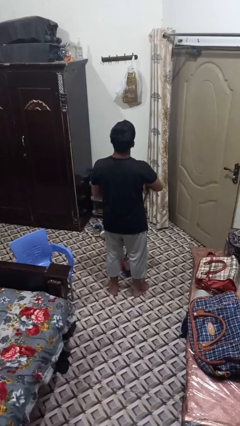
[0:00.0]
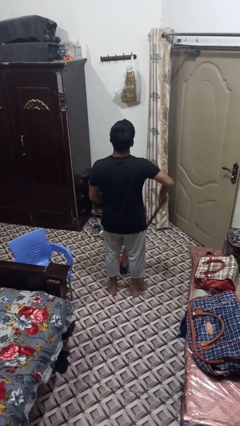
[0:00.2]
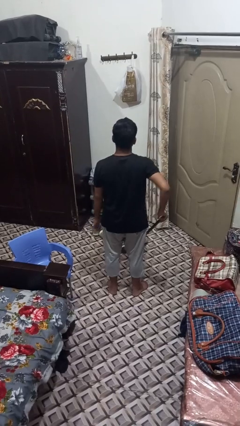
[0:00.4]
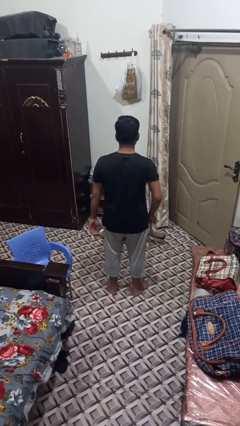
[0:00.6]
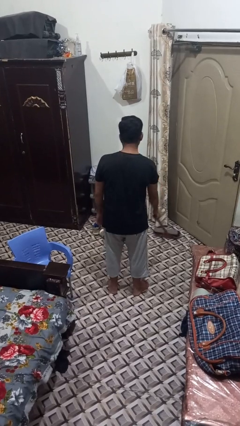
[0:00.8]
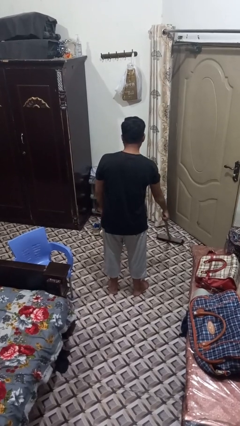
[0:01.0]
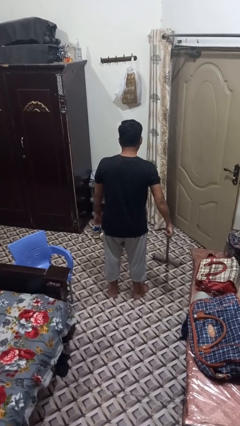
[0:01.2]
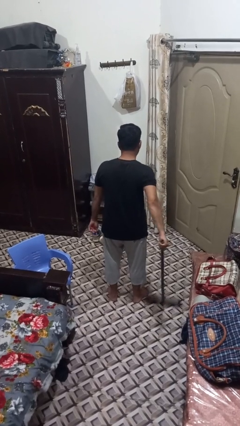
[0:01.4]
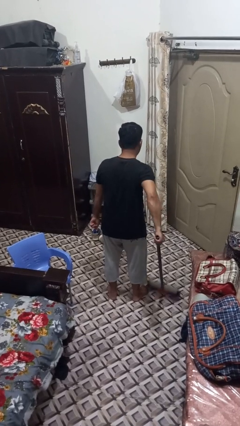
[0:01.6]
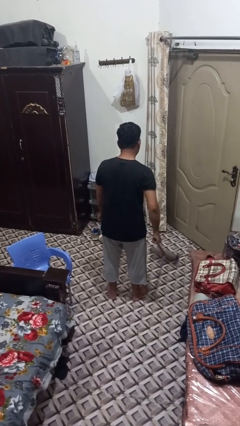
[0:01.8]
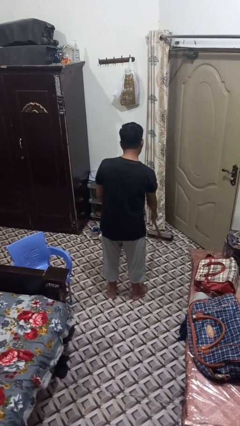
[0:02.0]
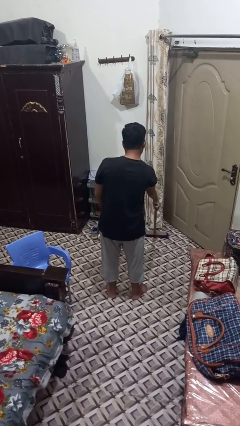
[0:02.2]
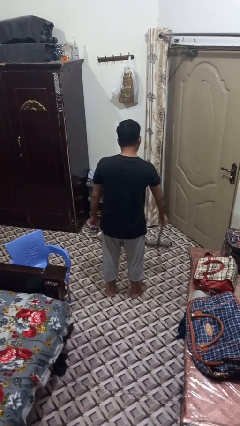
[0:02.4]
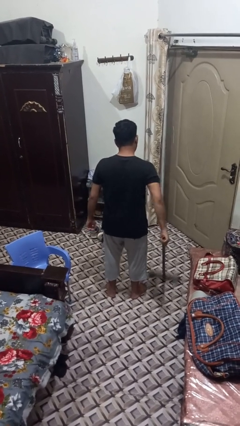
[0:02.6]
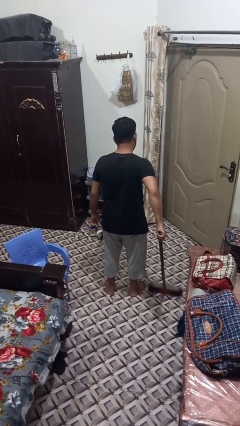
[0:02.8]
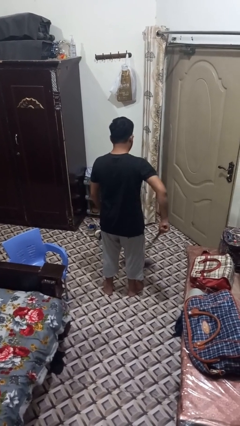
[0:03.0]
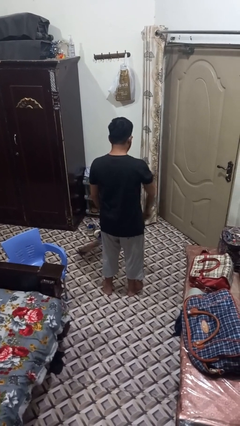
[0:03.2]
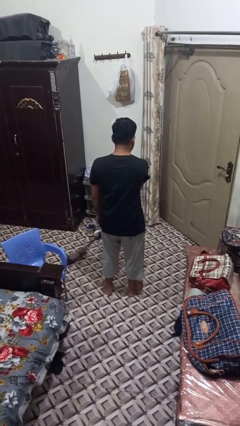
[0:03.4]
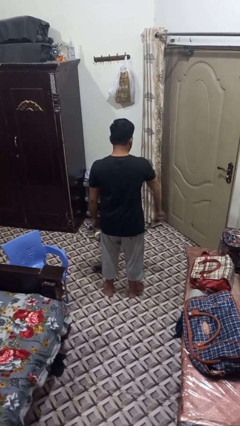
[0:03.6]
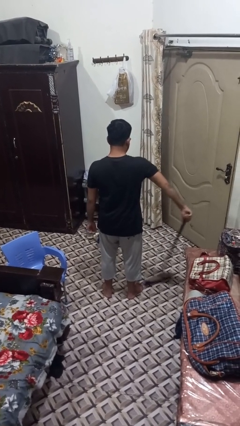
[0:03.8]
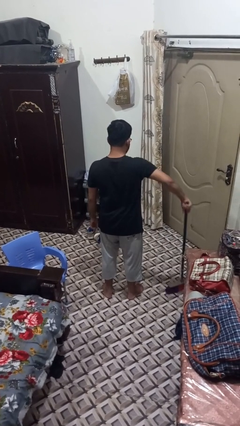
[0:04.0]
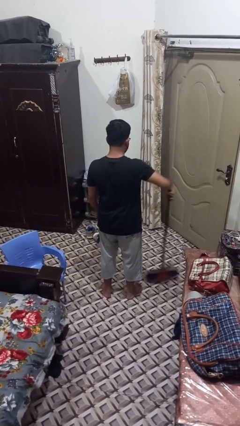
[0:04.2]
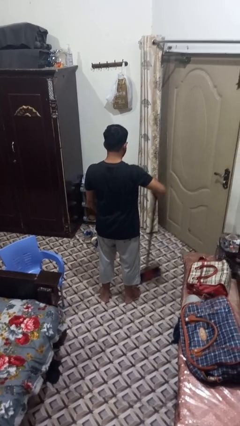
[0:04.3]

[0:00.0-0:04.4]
person sweeps floor

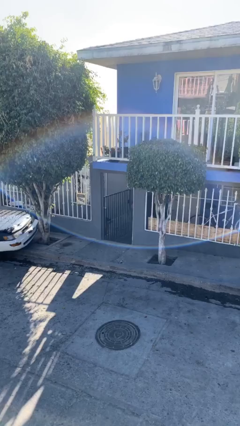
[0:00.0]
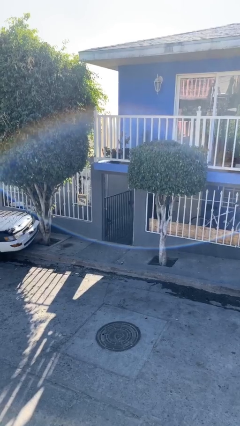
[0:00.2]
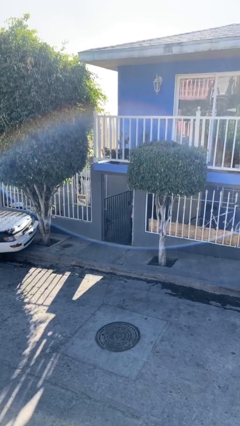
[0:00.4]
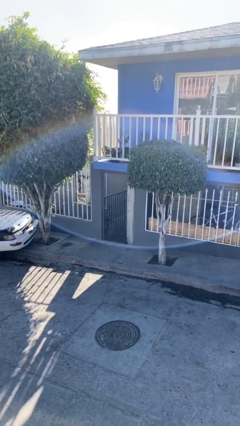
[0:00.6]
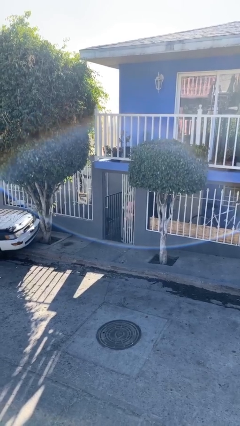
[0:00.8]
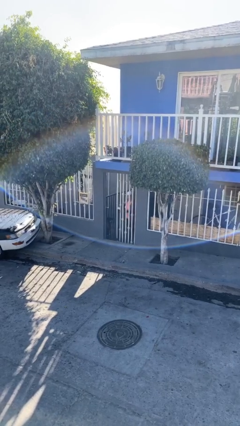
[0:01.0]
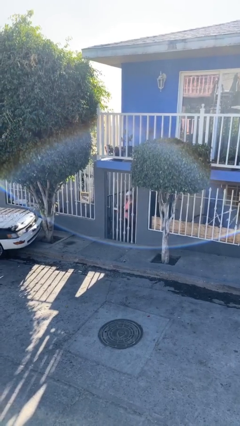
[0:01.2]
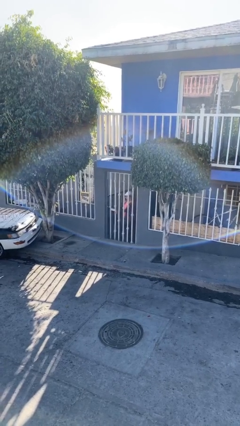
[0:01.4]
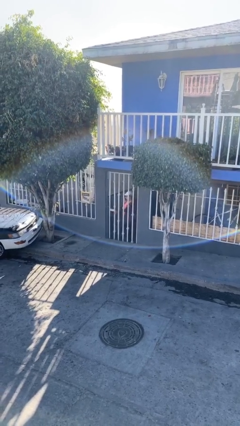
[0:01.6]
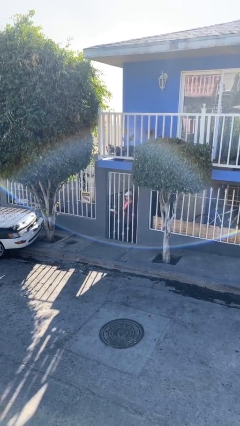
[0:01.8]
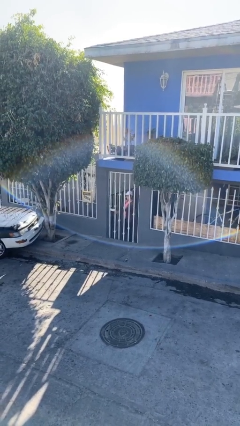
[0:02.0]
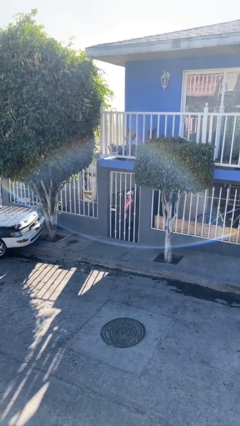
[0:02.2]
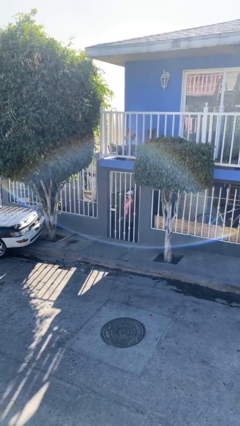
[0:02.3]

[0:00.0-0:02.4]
person closes facility door

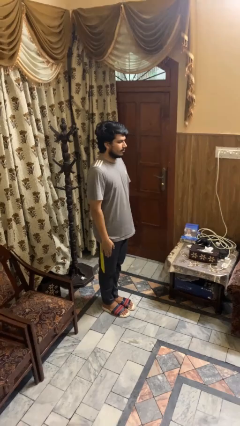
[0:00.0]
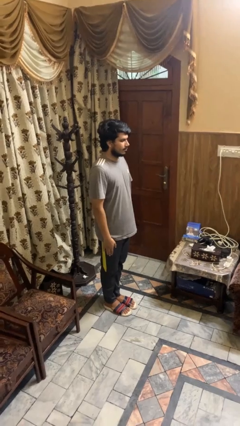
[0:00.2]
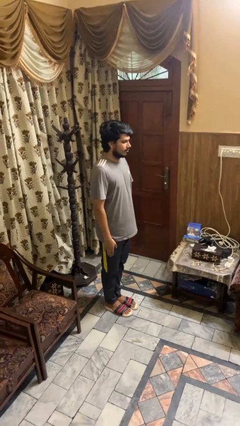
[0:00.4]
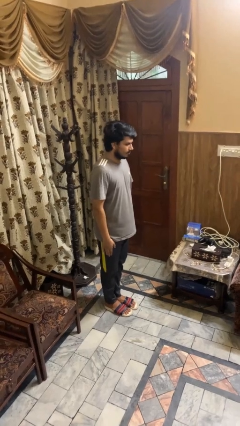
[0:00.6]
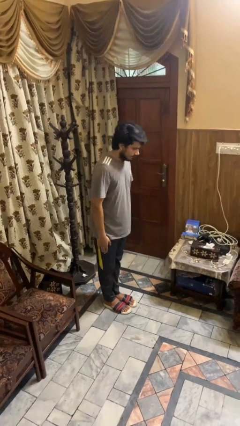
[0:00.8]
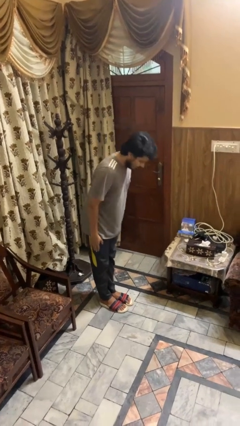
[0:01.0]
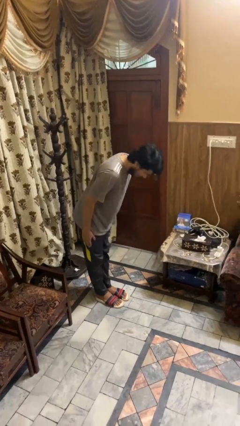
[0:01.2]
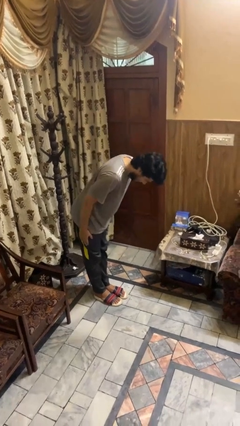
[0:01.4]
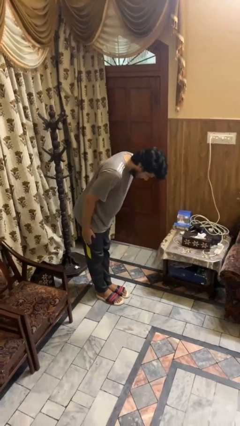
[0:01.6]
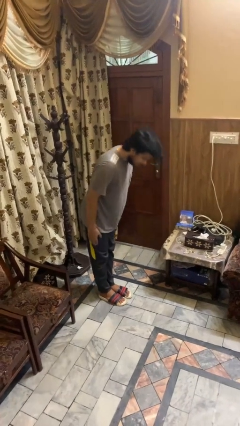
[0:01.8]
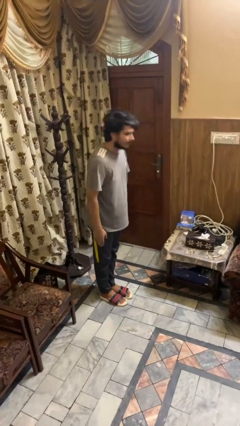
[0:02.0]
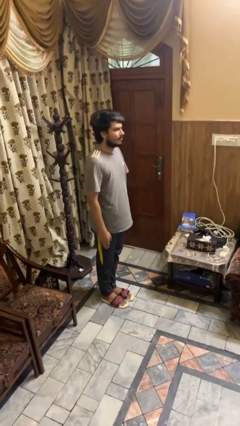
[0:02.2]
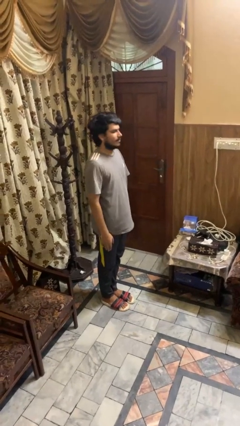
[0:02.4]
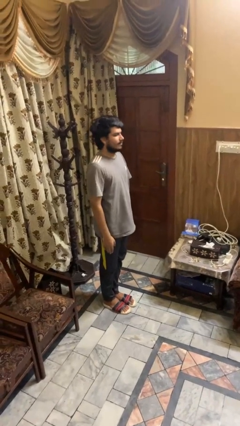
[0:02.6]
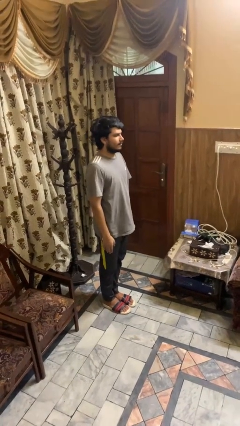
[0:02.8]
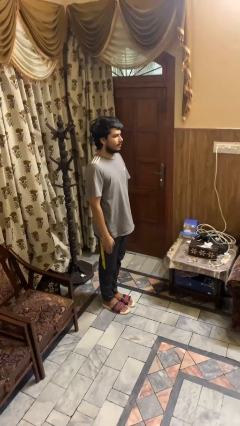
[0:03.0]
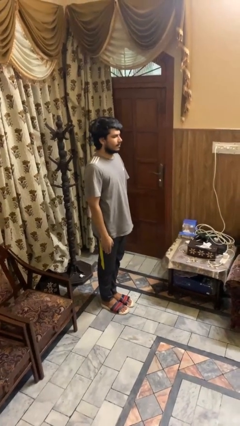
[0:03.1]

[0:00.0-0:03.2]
person bows

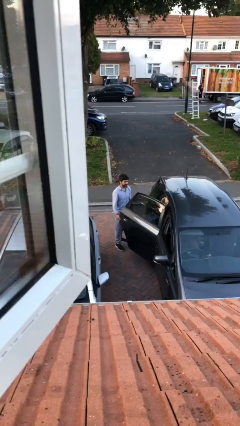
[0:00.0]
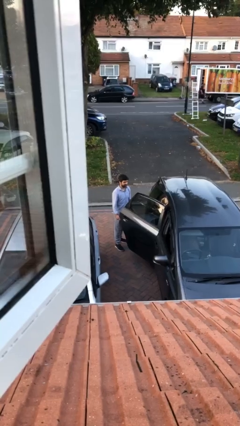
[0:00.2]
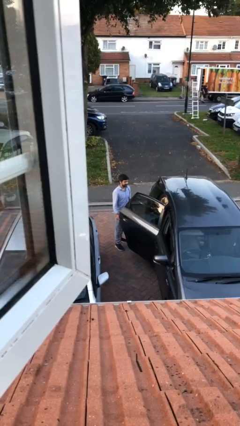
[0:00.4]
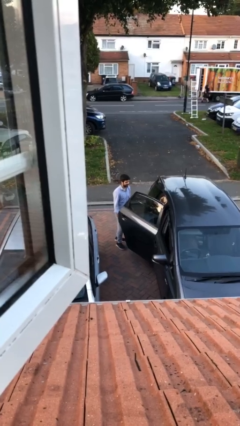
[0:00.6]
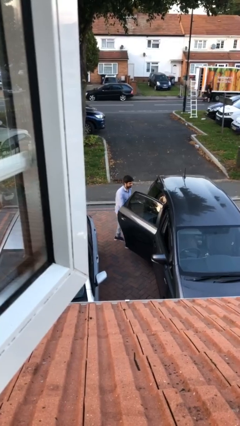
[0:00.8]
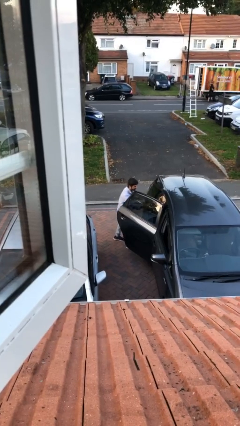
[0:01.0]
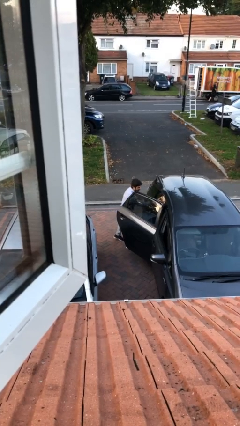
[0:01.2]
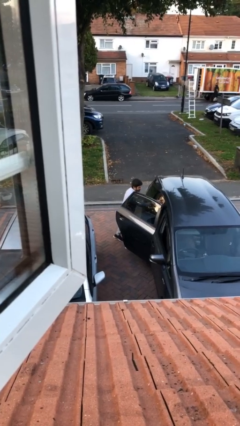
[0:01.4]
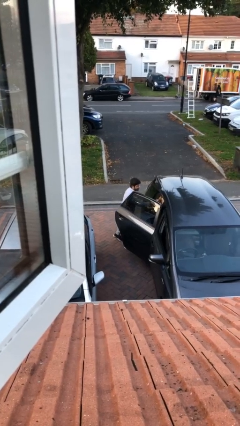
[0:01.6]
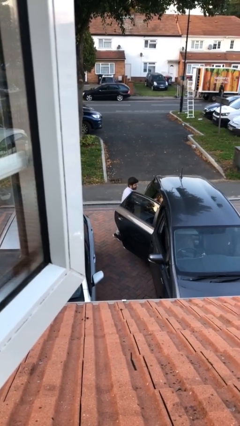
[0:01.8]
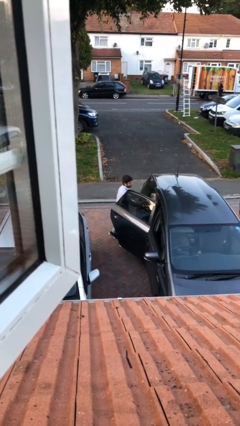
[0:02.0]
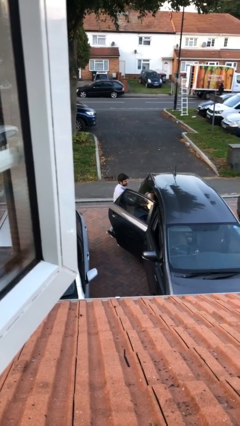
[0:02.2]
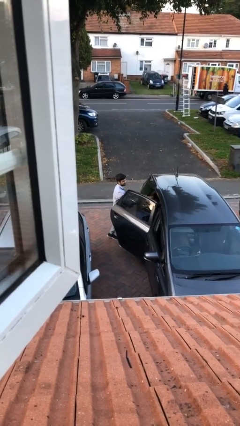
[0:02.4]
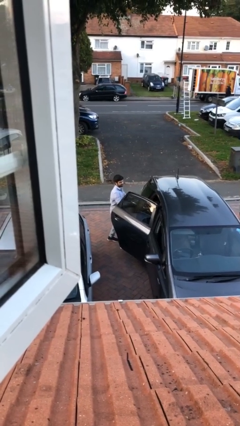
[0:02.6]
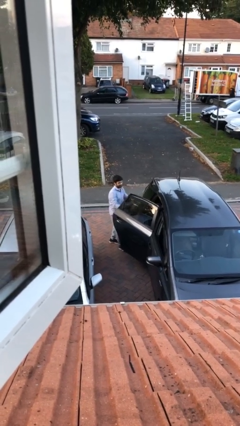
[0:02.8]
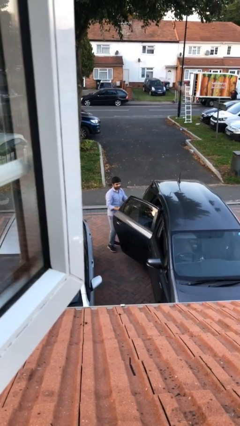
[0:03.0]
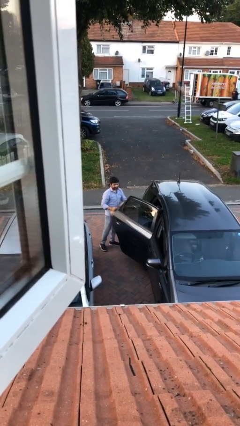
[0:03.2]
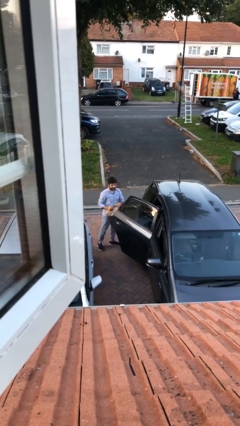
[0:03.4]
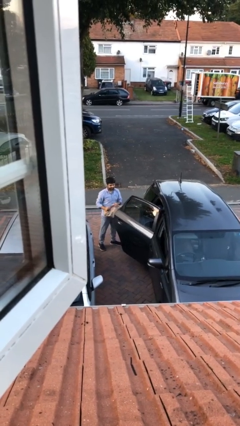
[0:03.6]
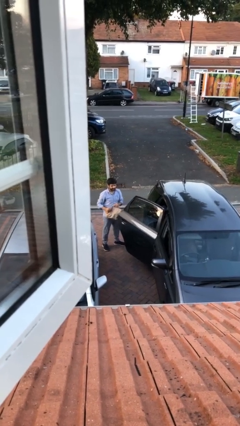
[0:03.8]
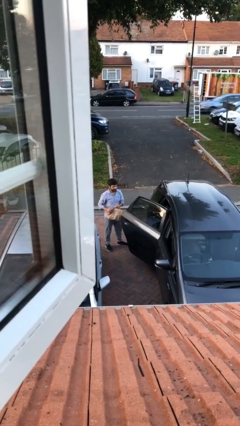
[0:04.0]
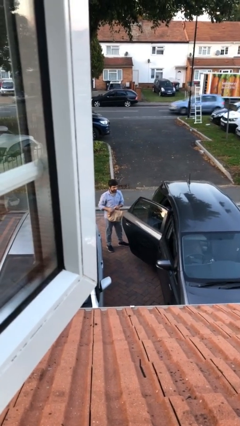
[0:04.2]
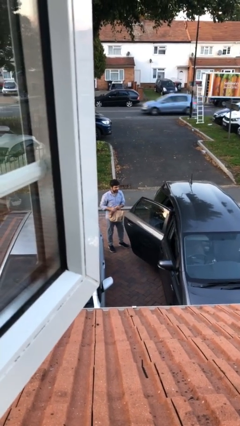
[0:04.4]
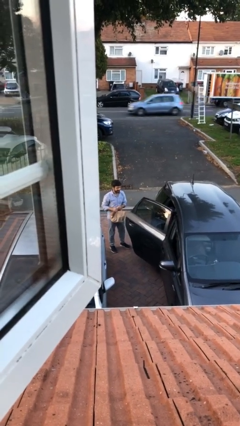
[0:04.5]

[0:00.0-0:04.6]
person unloads car

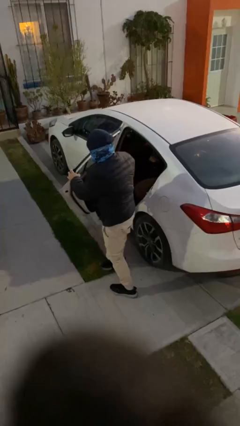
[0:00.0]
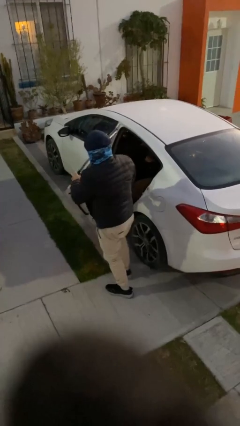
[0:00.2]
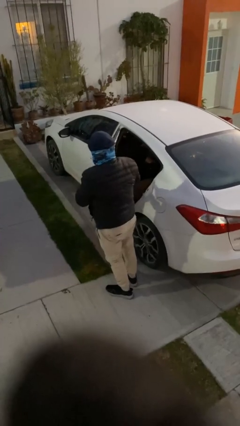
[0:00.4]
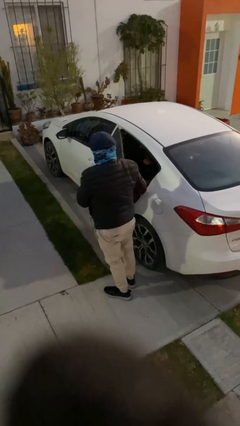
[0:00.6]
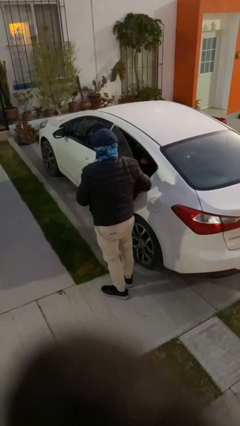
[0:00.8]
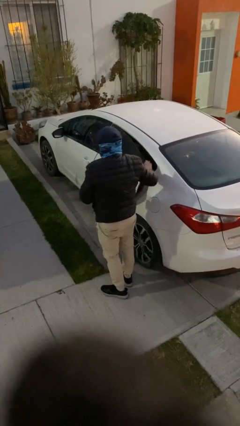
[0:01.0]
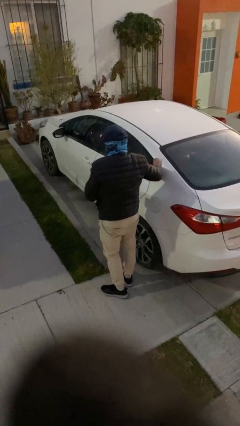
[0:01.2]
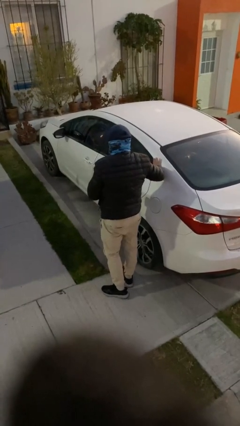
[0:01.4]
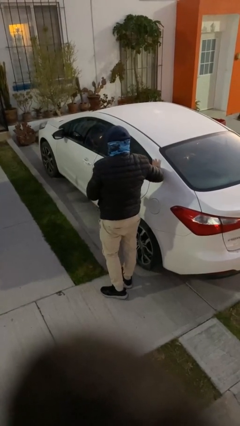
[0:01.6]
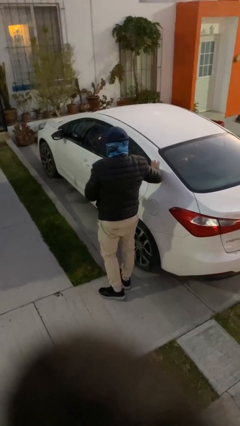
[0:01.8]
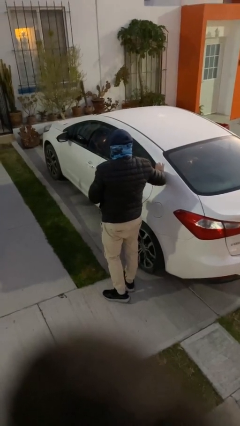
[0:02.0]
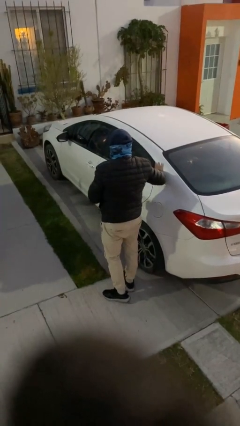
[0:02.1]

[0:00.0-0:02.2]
person closes car door

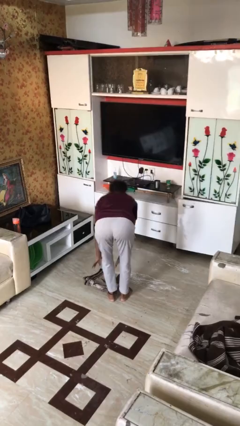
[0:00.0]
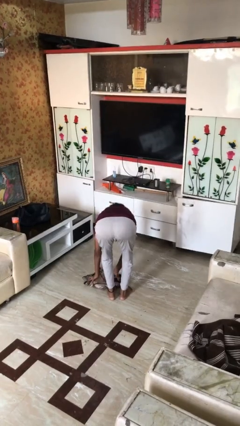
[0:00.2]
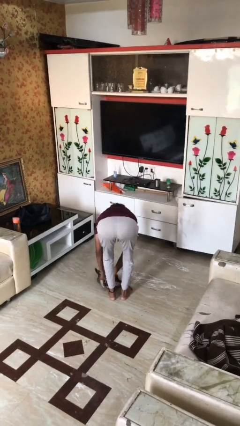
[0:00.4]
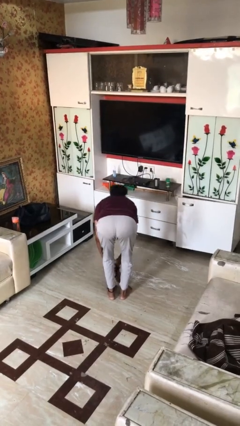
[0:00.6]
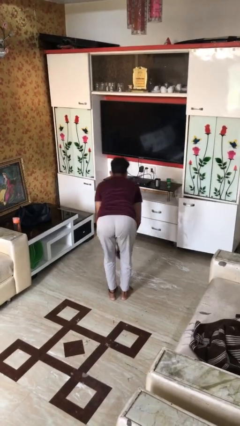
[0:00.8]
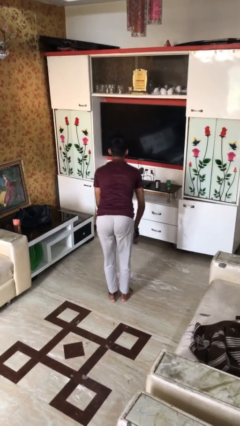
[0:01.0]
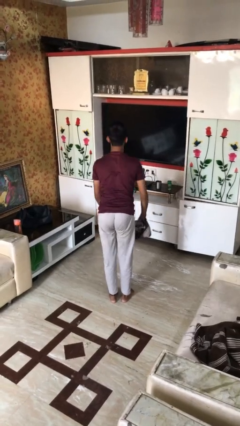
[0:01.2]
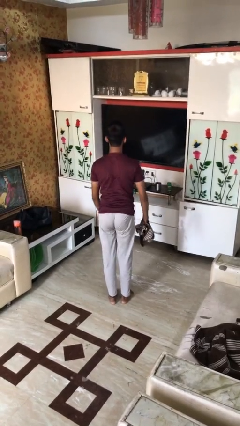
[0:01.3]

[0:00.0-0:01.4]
person picks up object from floor
